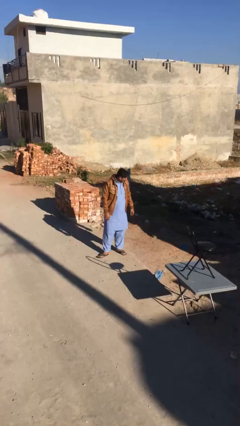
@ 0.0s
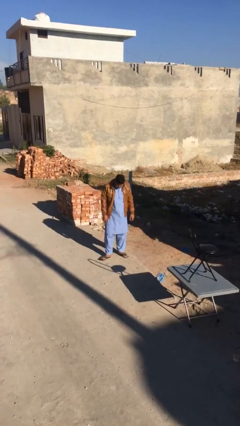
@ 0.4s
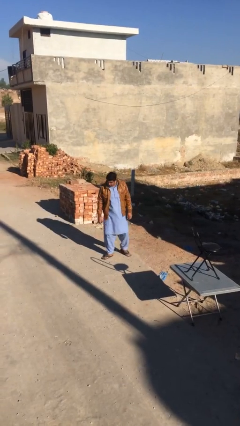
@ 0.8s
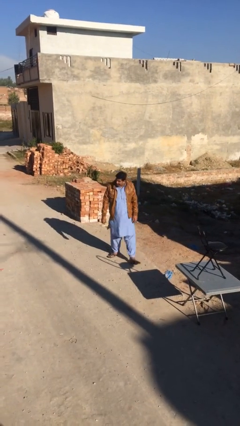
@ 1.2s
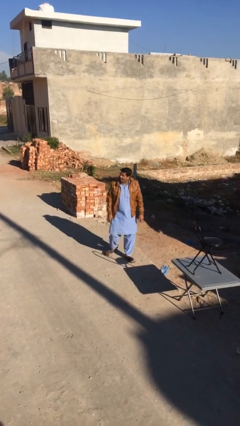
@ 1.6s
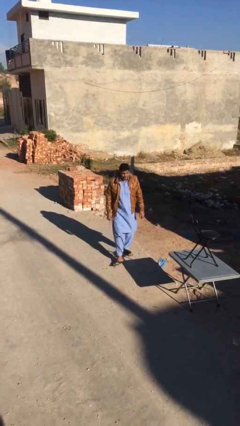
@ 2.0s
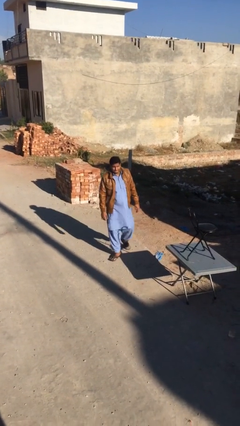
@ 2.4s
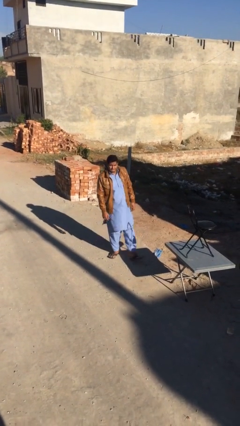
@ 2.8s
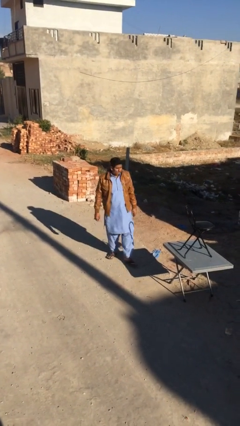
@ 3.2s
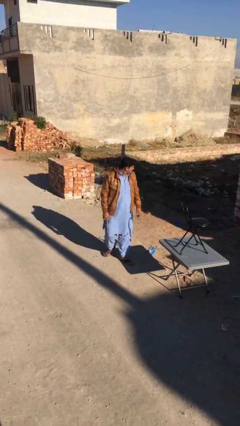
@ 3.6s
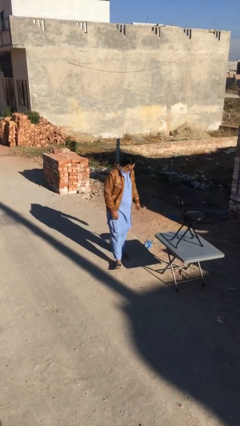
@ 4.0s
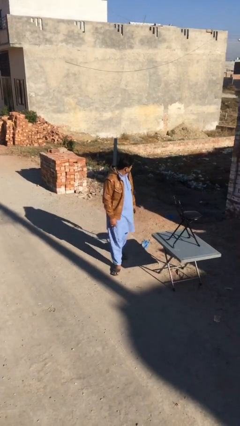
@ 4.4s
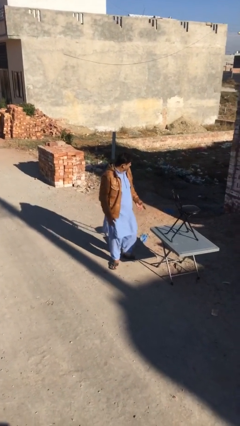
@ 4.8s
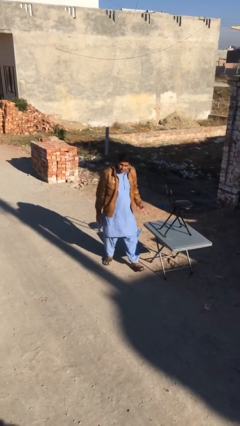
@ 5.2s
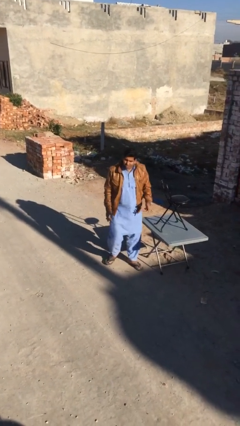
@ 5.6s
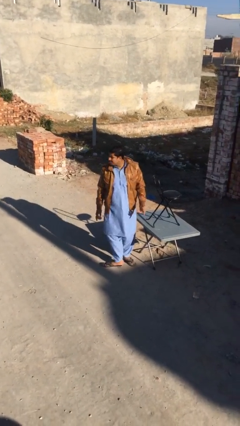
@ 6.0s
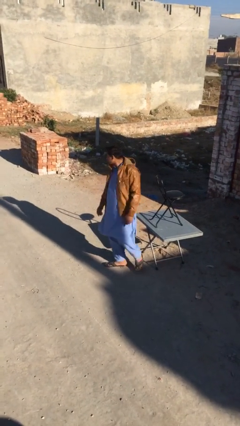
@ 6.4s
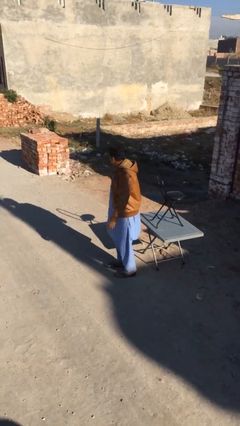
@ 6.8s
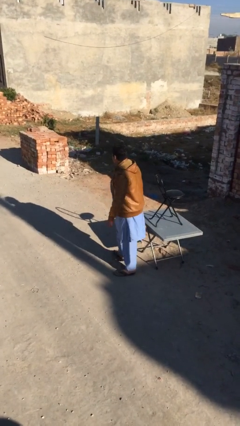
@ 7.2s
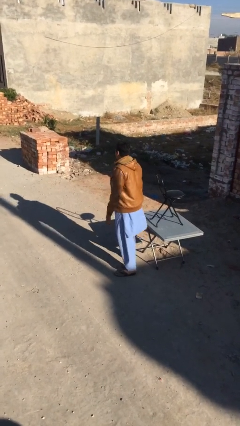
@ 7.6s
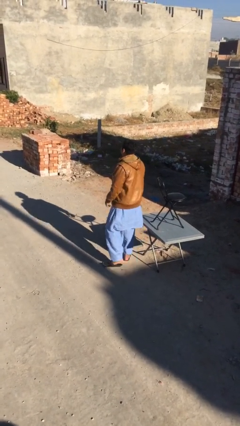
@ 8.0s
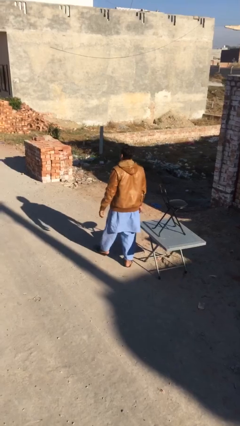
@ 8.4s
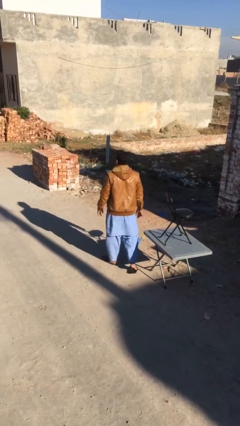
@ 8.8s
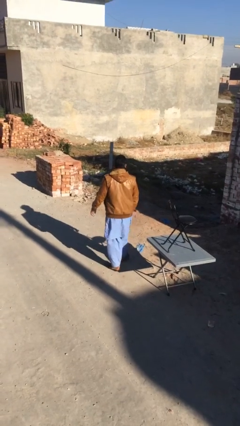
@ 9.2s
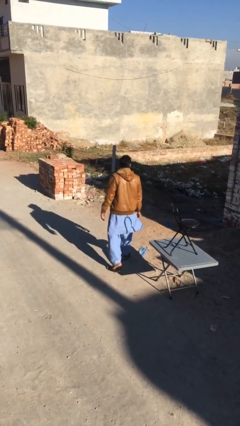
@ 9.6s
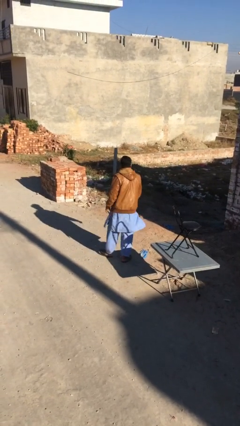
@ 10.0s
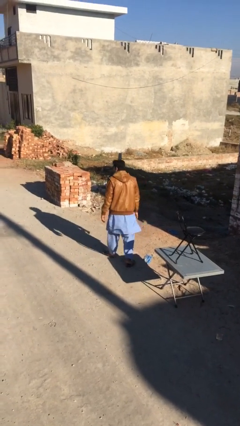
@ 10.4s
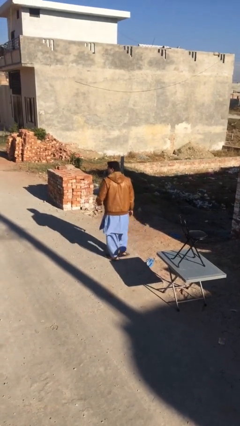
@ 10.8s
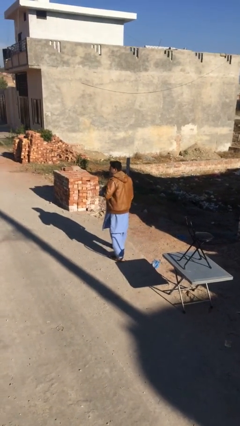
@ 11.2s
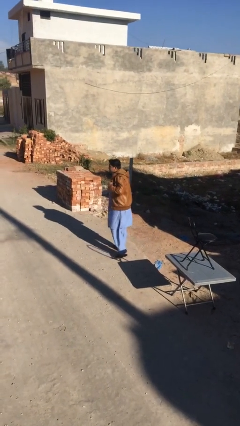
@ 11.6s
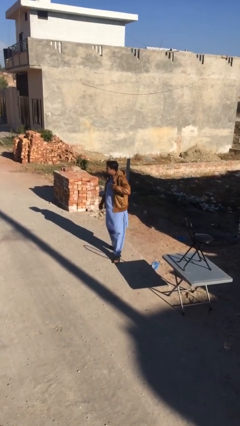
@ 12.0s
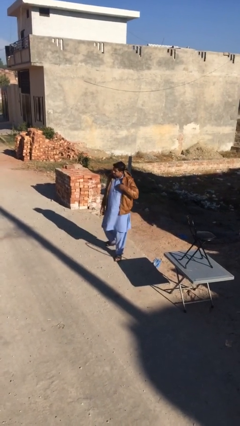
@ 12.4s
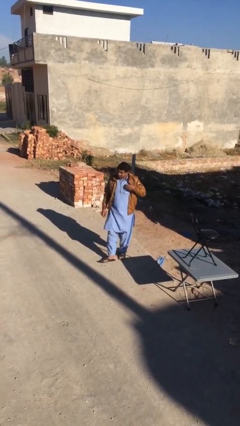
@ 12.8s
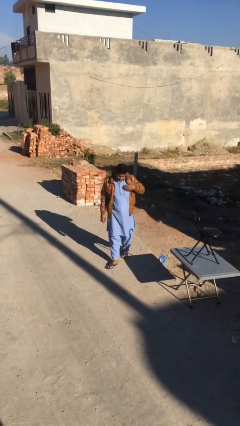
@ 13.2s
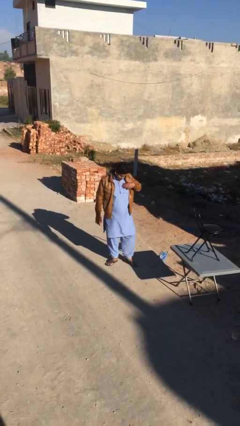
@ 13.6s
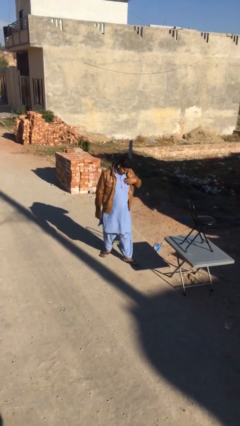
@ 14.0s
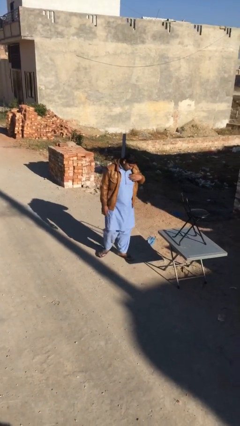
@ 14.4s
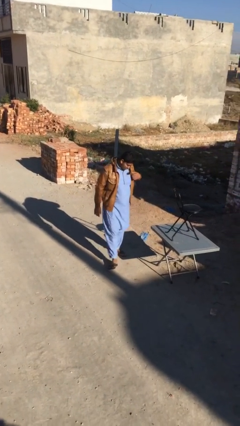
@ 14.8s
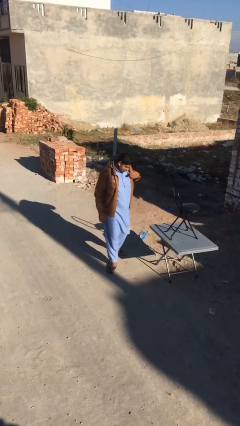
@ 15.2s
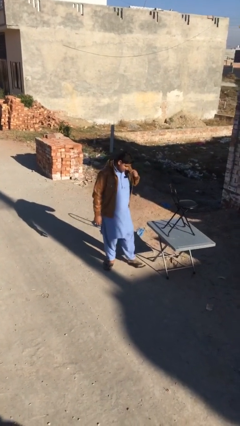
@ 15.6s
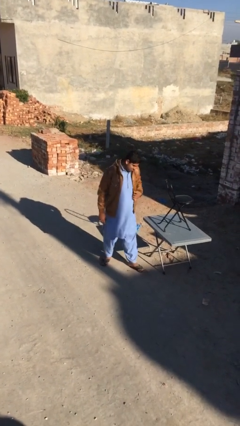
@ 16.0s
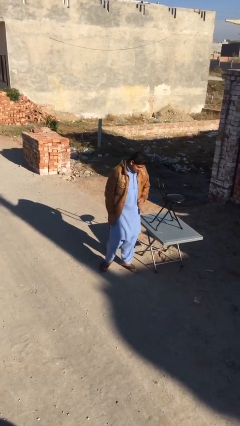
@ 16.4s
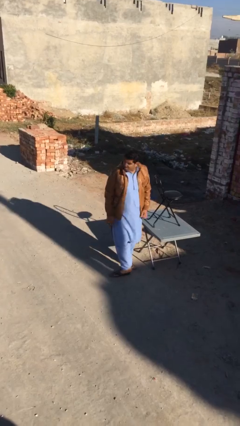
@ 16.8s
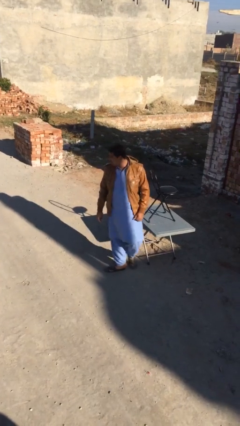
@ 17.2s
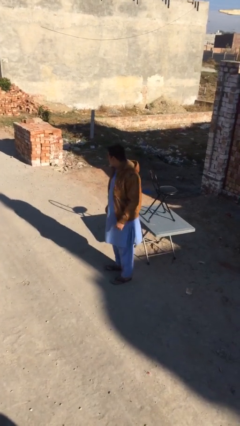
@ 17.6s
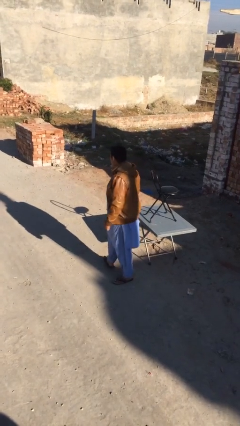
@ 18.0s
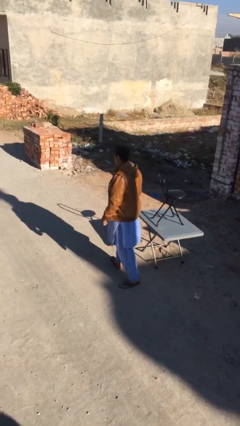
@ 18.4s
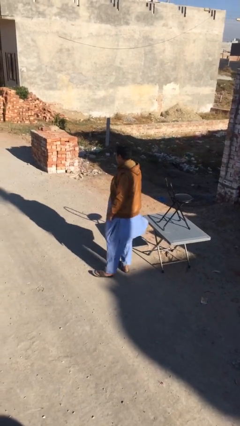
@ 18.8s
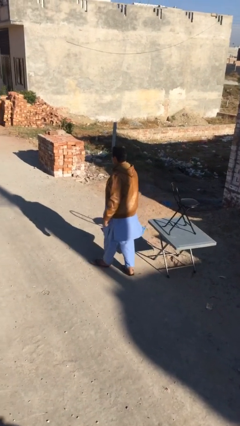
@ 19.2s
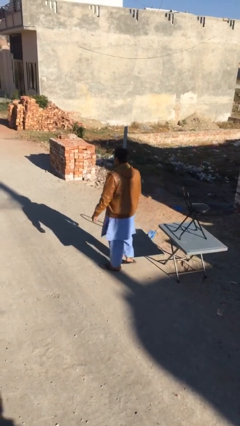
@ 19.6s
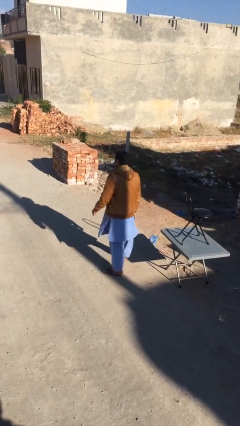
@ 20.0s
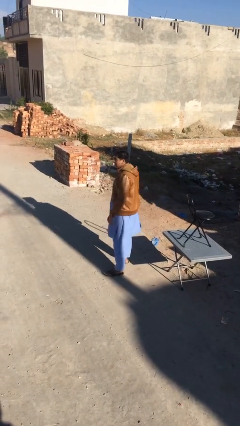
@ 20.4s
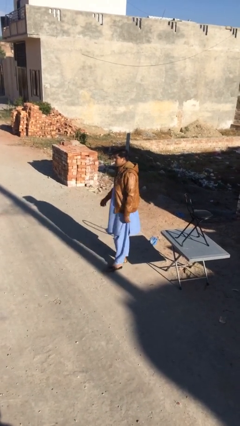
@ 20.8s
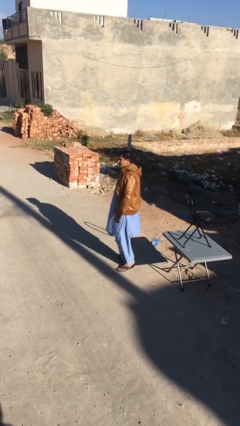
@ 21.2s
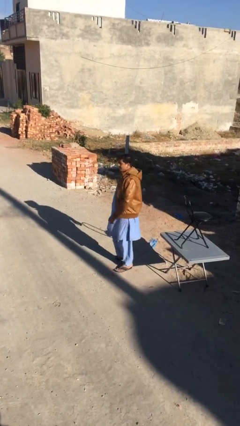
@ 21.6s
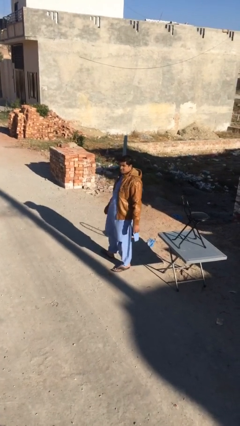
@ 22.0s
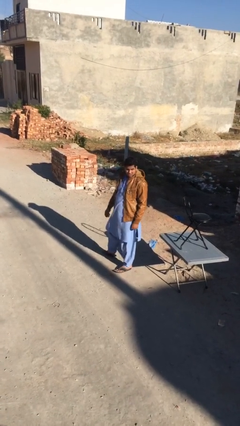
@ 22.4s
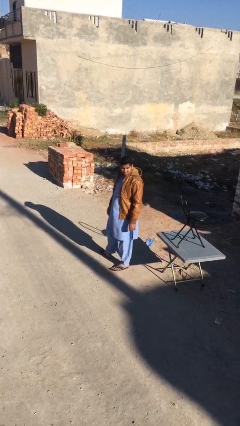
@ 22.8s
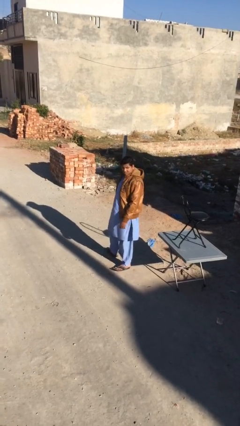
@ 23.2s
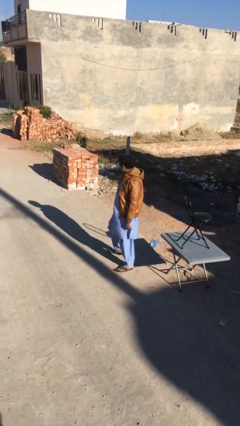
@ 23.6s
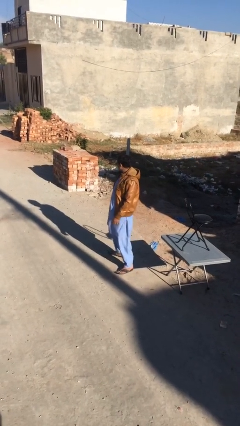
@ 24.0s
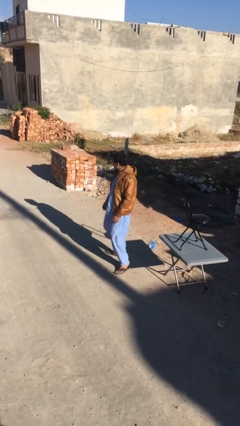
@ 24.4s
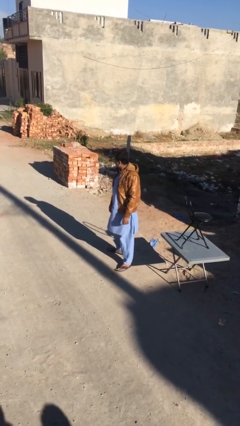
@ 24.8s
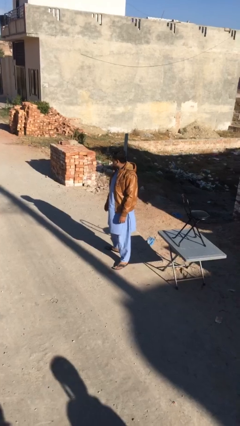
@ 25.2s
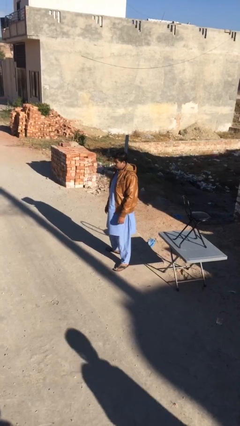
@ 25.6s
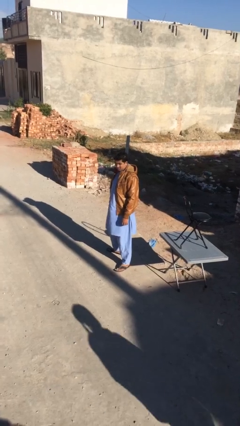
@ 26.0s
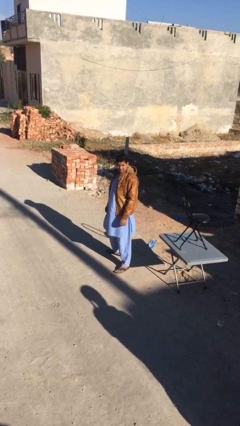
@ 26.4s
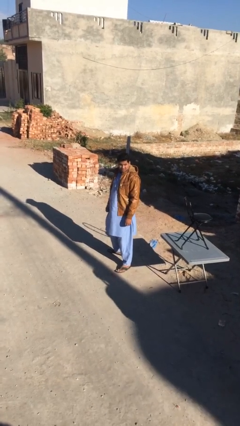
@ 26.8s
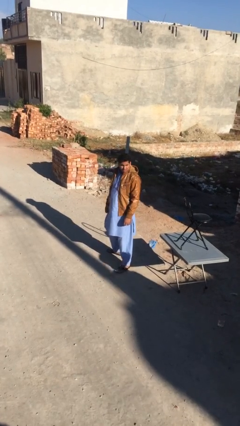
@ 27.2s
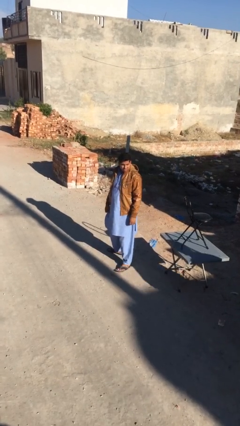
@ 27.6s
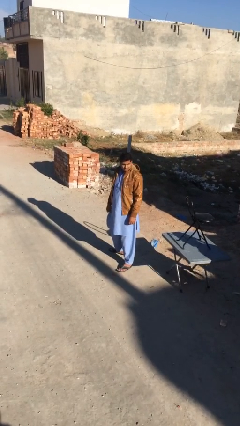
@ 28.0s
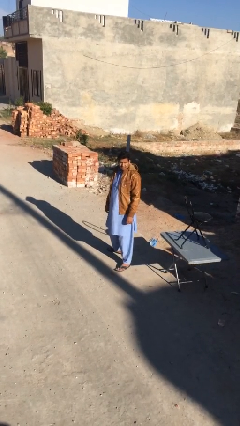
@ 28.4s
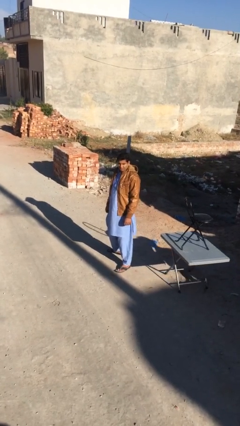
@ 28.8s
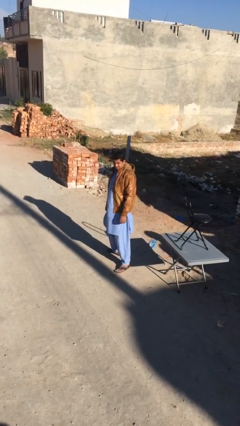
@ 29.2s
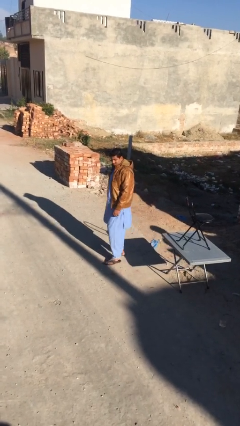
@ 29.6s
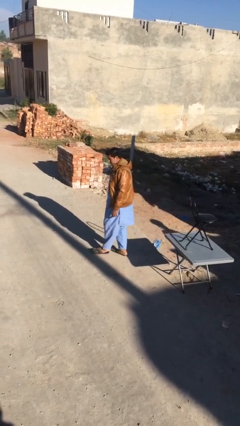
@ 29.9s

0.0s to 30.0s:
person walks

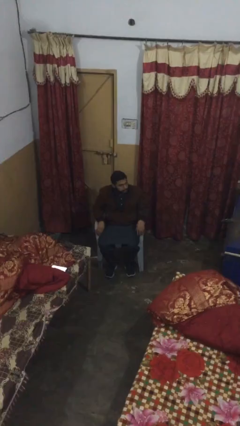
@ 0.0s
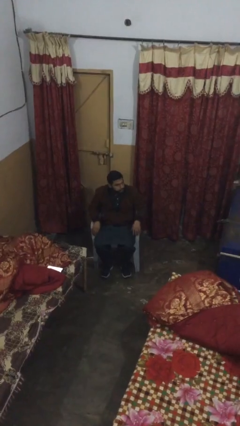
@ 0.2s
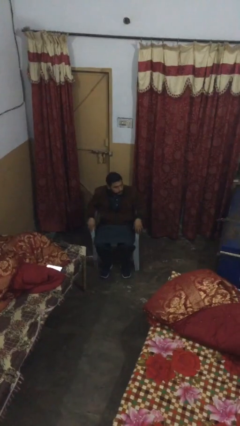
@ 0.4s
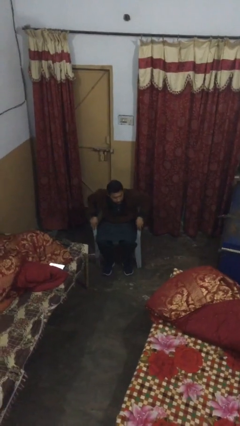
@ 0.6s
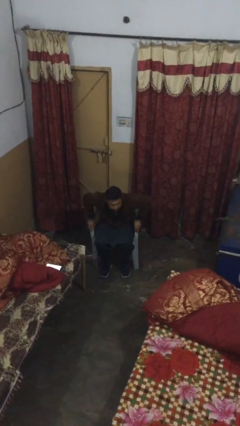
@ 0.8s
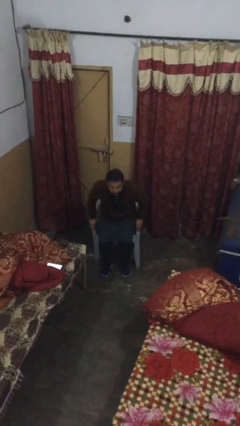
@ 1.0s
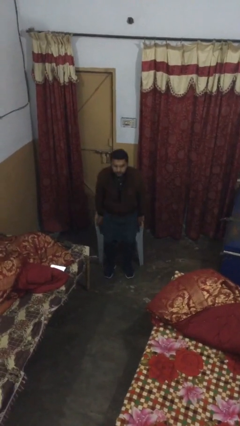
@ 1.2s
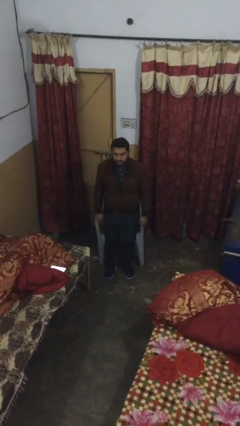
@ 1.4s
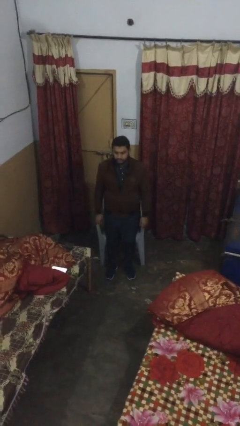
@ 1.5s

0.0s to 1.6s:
person stands up

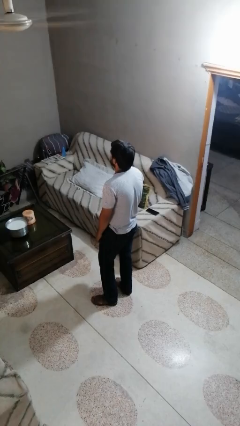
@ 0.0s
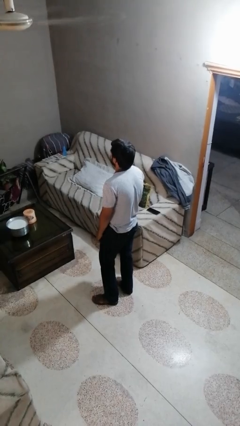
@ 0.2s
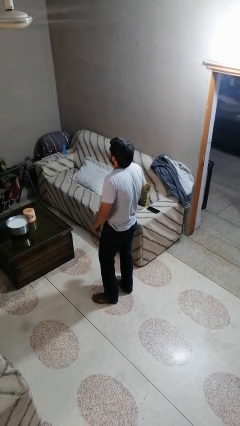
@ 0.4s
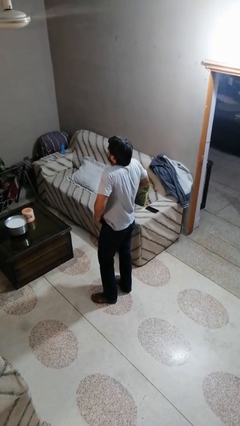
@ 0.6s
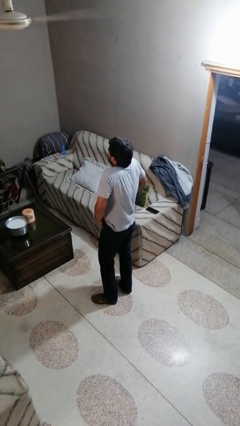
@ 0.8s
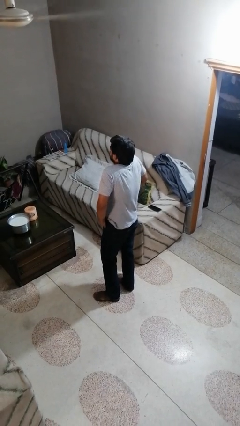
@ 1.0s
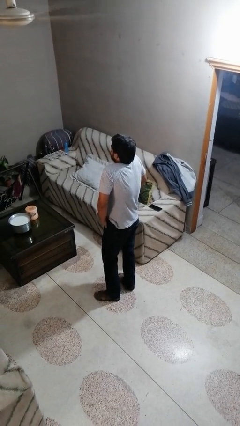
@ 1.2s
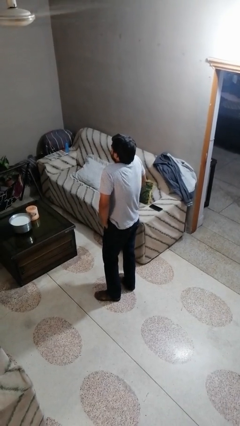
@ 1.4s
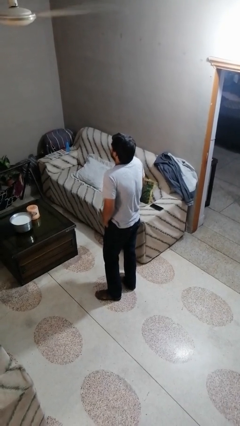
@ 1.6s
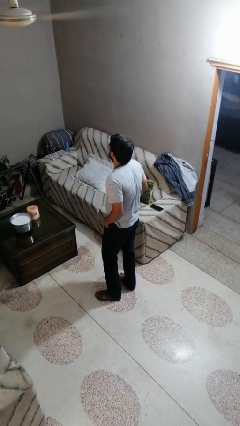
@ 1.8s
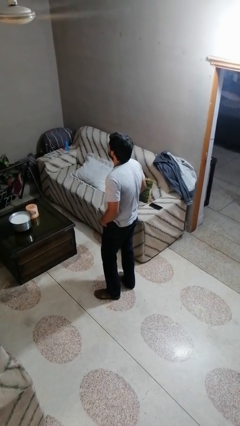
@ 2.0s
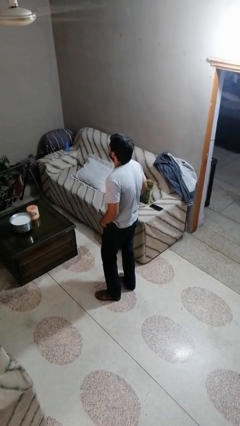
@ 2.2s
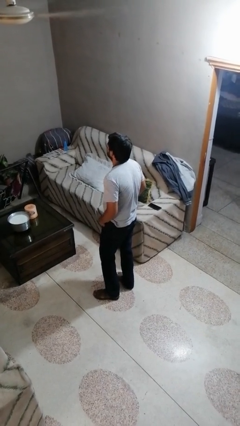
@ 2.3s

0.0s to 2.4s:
person puts hands in back pockets
